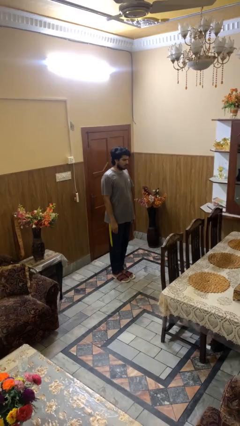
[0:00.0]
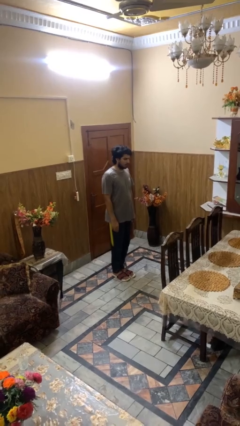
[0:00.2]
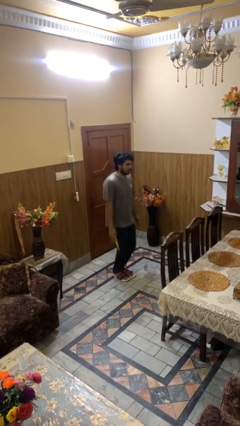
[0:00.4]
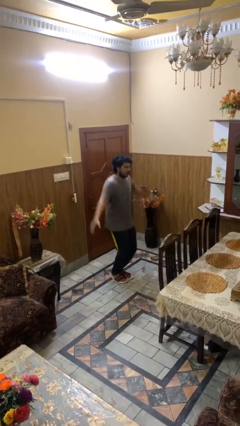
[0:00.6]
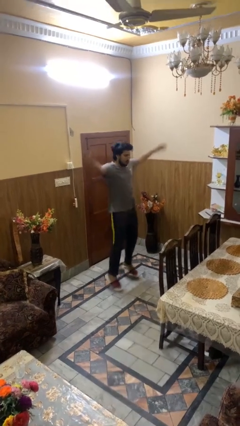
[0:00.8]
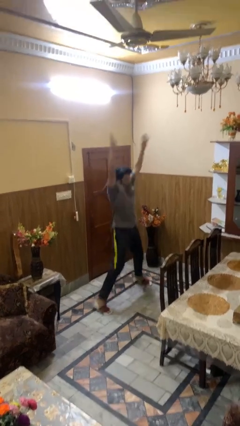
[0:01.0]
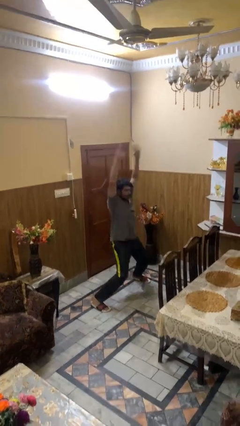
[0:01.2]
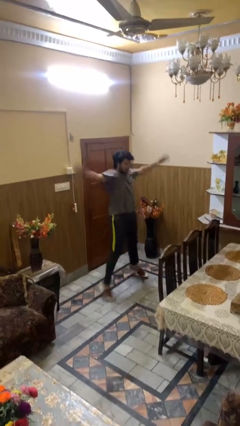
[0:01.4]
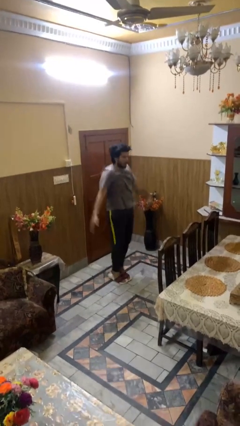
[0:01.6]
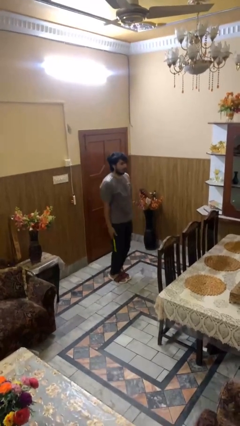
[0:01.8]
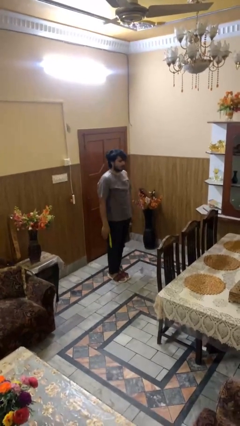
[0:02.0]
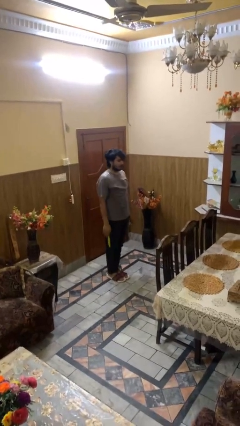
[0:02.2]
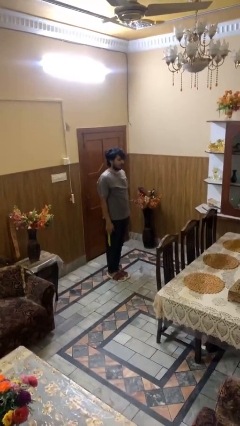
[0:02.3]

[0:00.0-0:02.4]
person exercises with jumping jacks

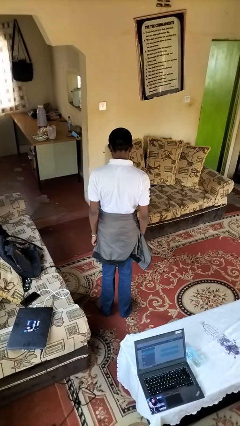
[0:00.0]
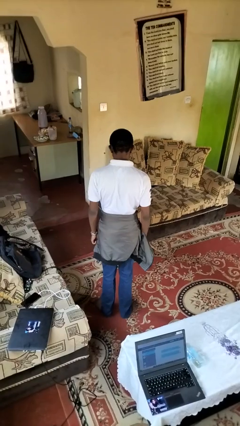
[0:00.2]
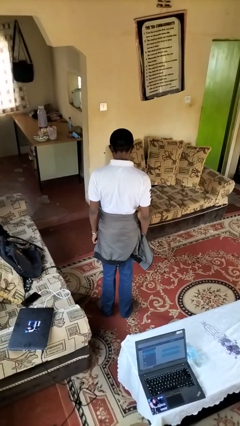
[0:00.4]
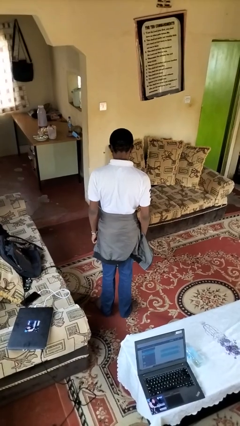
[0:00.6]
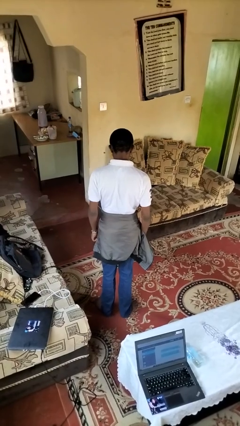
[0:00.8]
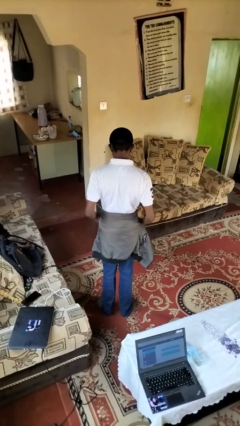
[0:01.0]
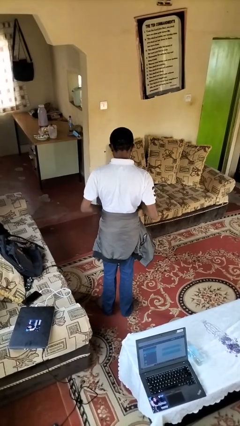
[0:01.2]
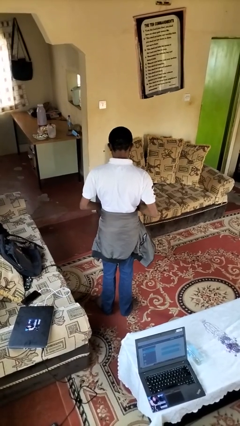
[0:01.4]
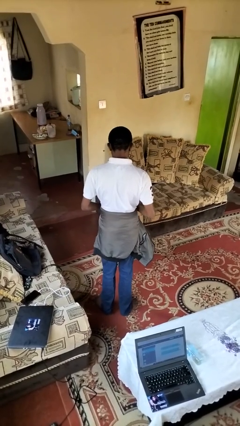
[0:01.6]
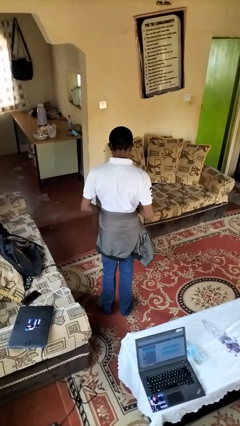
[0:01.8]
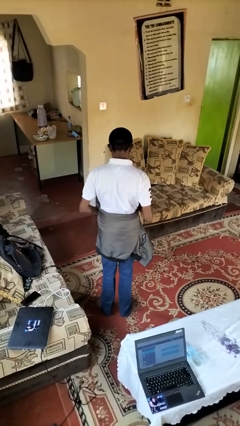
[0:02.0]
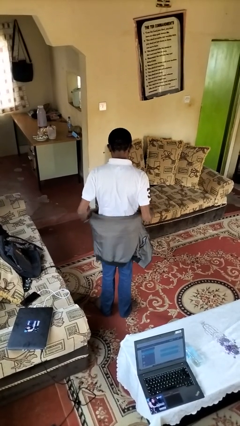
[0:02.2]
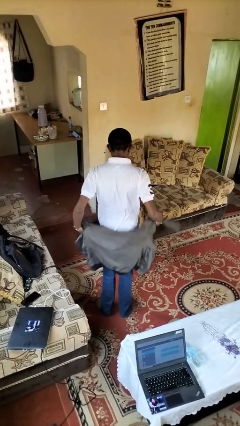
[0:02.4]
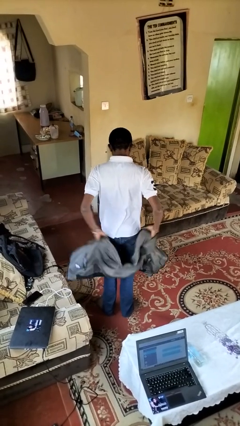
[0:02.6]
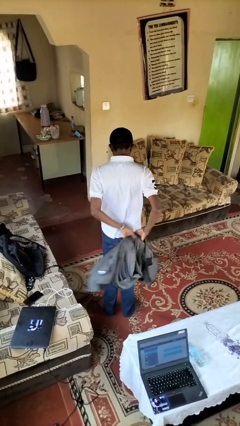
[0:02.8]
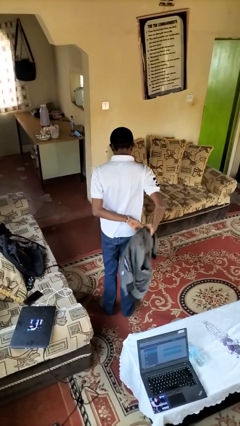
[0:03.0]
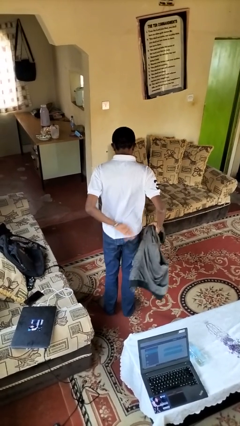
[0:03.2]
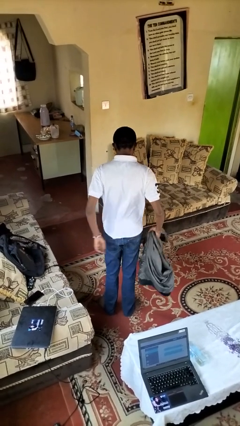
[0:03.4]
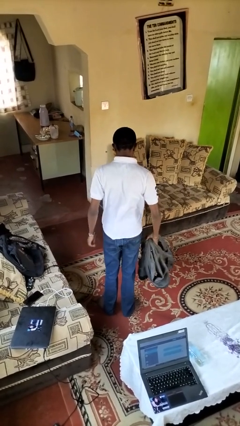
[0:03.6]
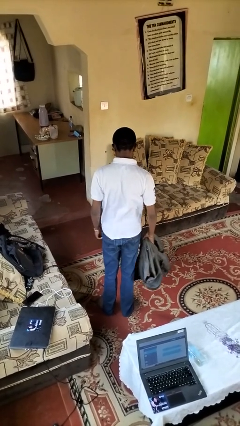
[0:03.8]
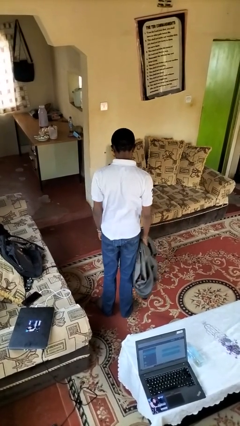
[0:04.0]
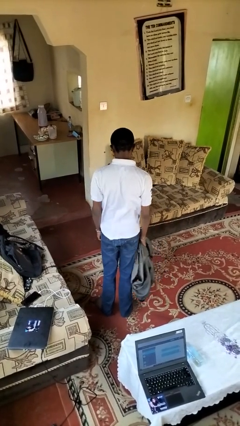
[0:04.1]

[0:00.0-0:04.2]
person unties jacket around waist

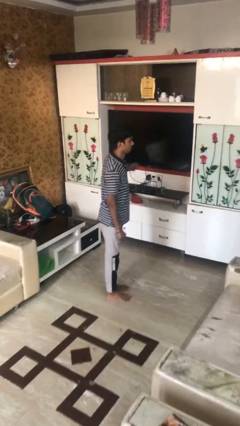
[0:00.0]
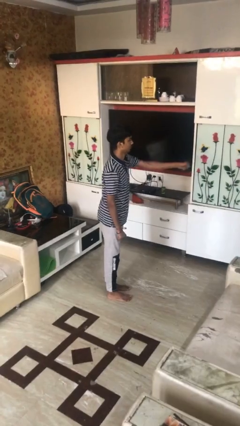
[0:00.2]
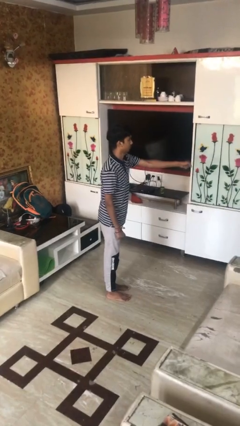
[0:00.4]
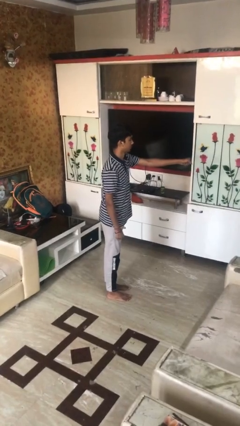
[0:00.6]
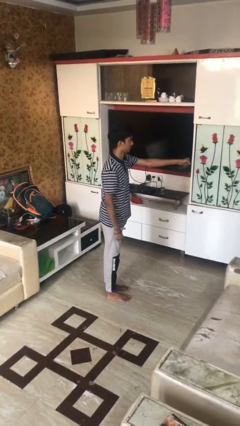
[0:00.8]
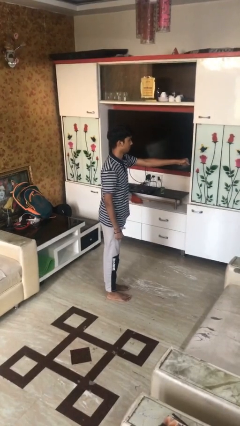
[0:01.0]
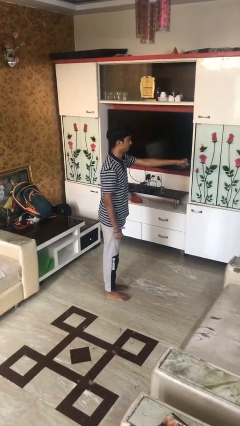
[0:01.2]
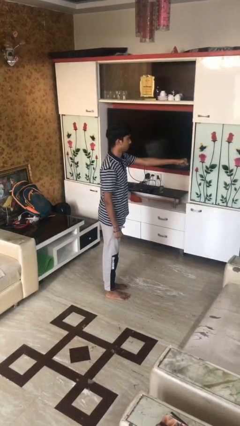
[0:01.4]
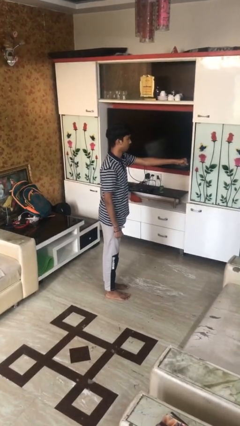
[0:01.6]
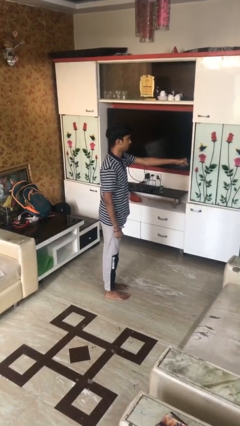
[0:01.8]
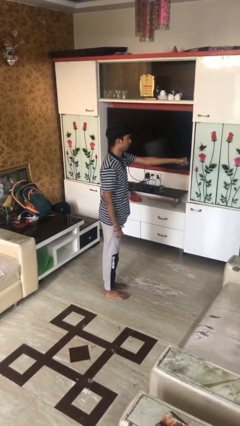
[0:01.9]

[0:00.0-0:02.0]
person punches

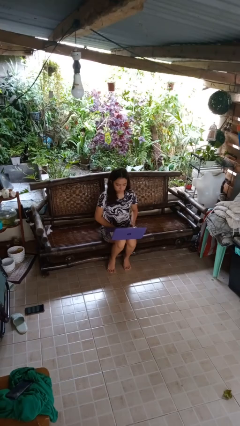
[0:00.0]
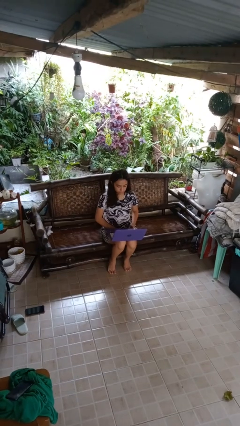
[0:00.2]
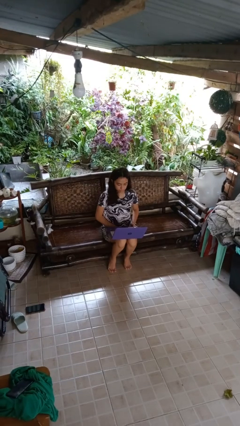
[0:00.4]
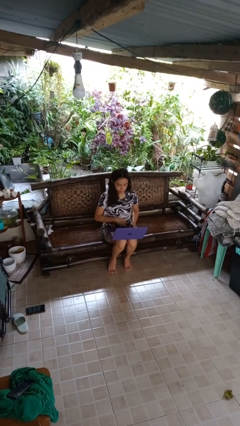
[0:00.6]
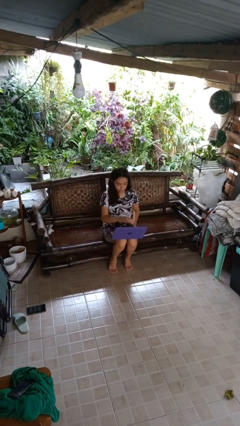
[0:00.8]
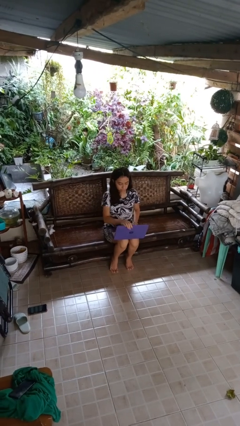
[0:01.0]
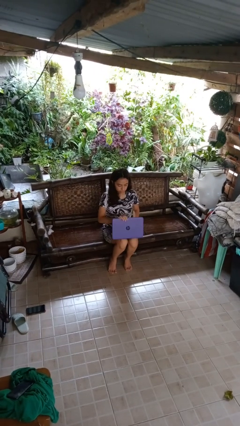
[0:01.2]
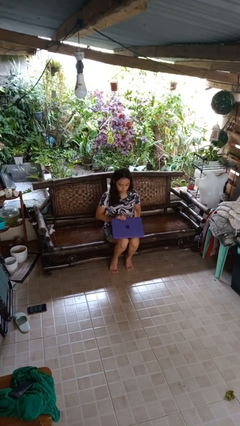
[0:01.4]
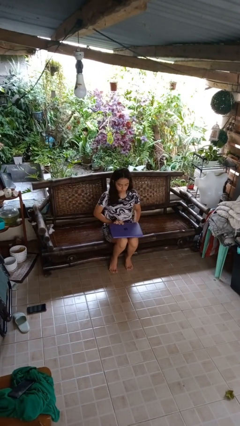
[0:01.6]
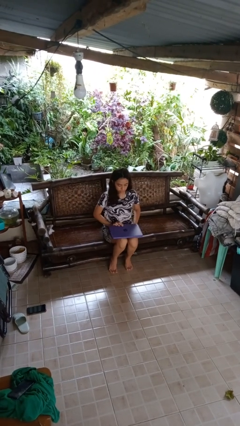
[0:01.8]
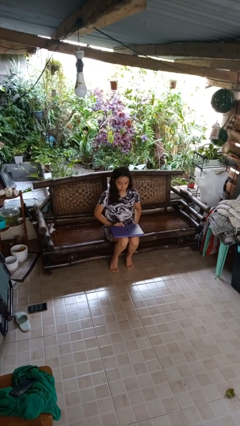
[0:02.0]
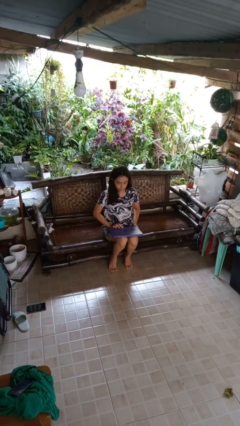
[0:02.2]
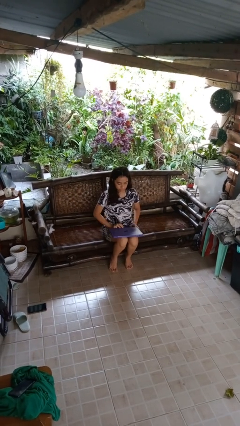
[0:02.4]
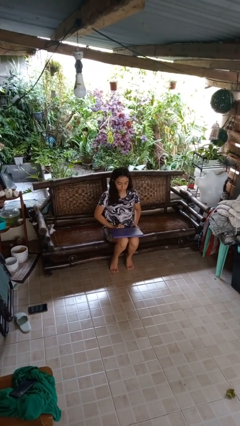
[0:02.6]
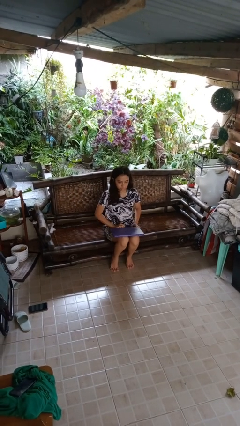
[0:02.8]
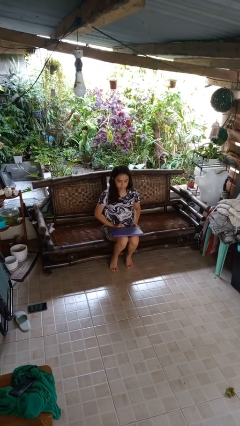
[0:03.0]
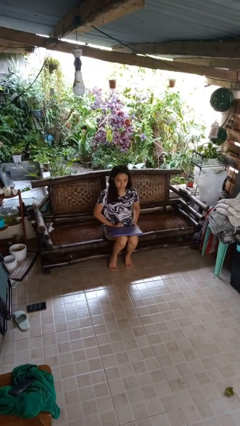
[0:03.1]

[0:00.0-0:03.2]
person closes laptop

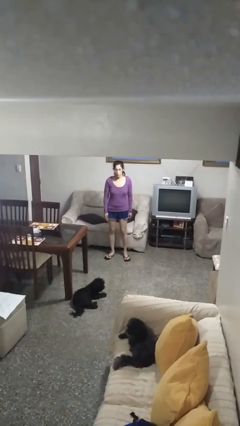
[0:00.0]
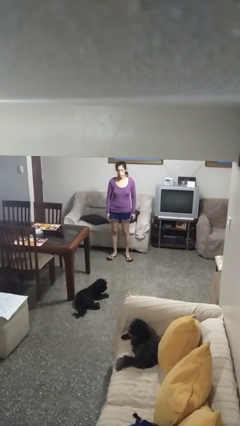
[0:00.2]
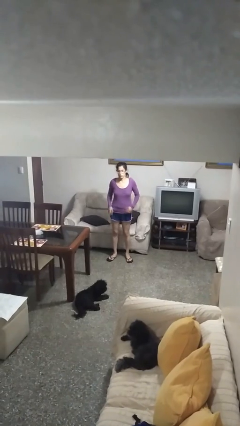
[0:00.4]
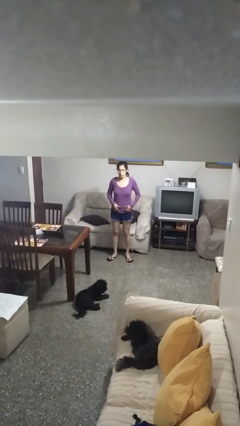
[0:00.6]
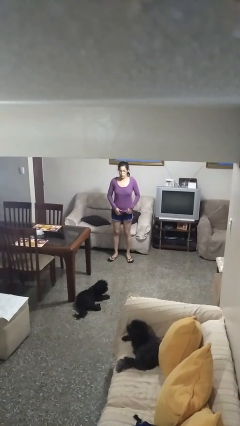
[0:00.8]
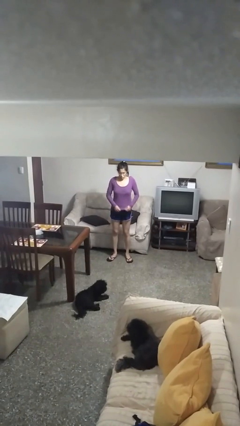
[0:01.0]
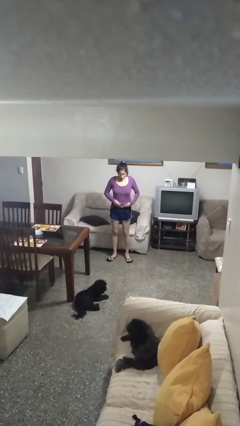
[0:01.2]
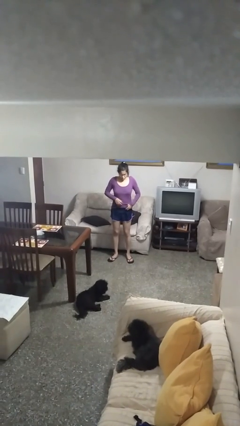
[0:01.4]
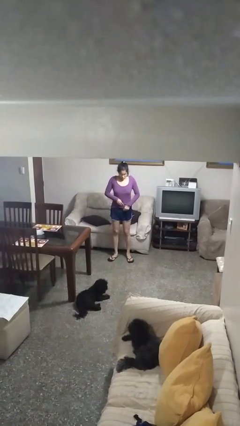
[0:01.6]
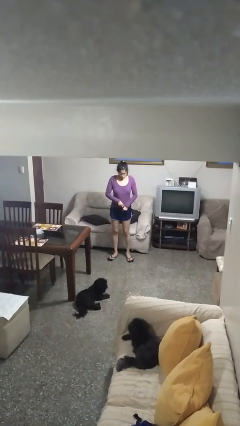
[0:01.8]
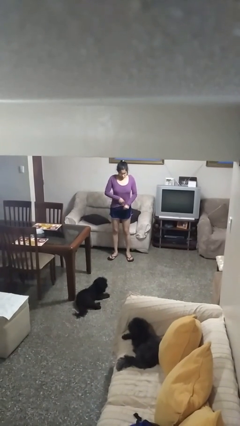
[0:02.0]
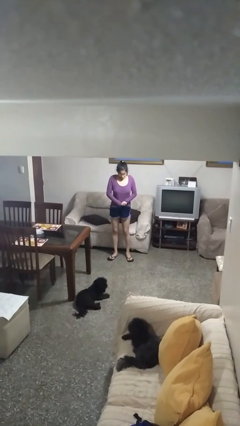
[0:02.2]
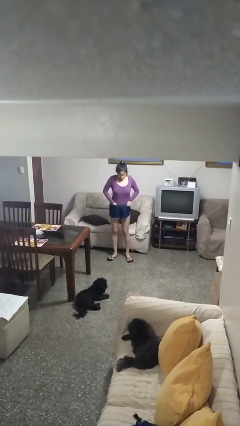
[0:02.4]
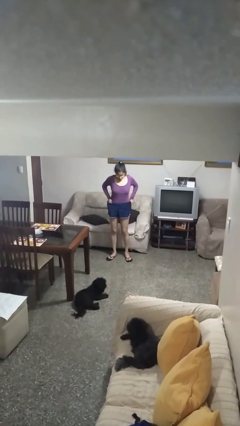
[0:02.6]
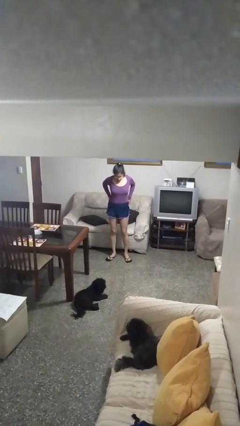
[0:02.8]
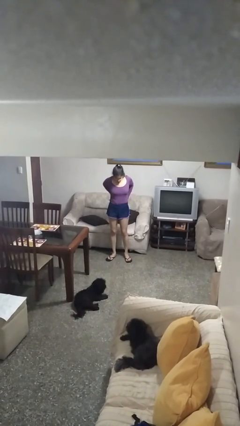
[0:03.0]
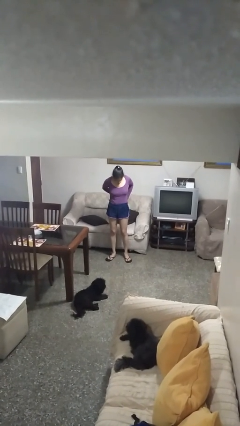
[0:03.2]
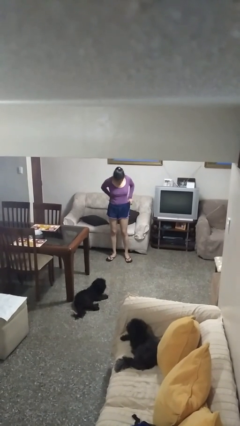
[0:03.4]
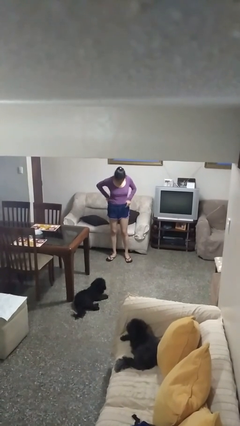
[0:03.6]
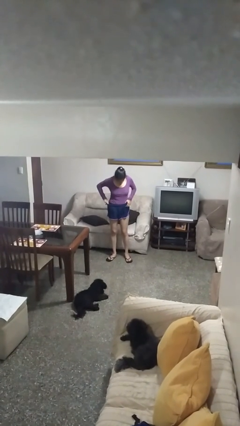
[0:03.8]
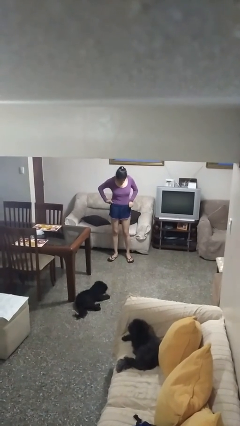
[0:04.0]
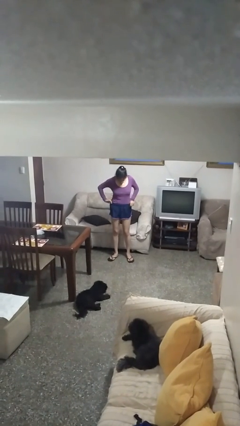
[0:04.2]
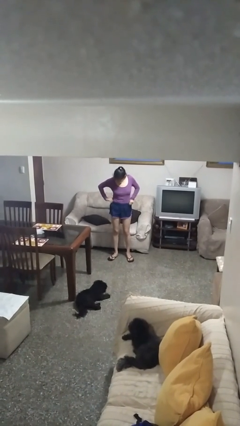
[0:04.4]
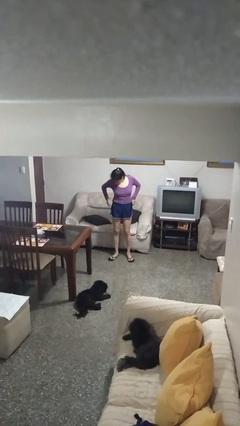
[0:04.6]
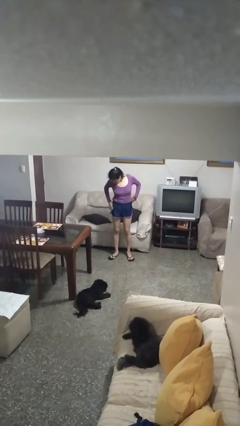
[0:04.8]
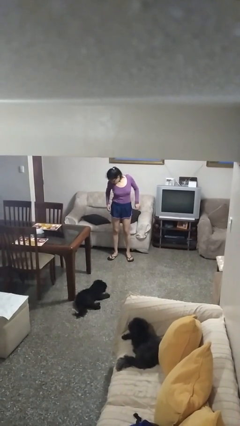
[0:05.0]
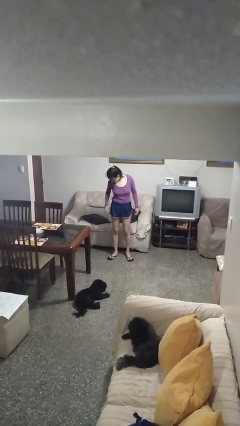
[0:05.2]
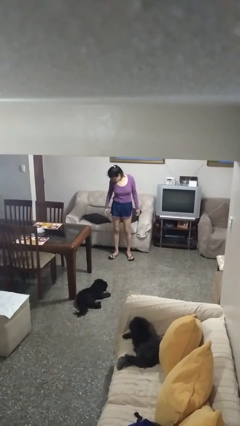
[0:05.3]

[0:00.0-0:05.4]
person tucks in shirt

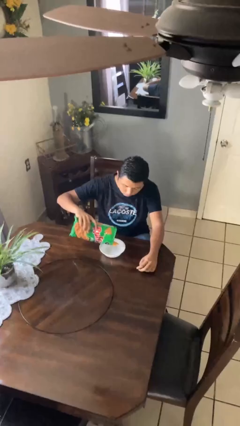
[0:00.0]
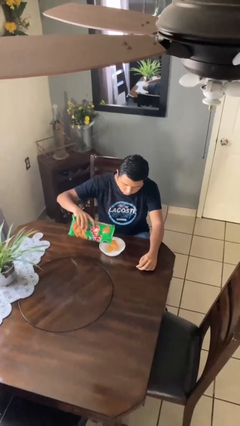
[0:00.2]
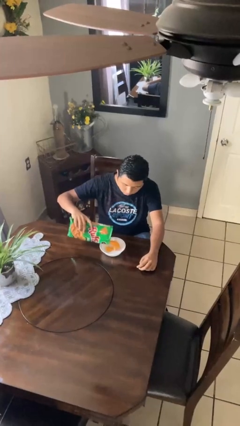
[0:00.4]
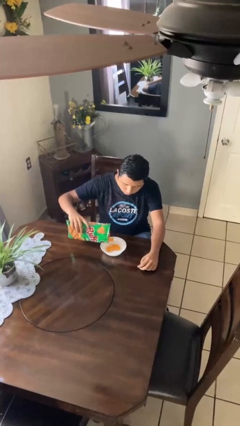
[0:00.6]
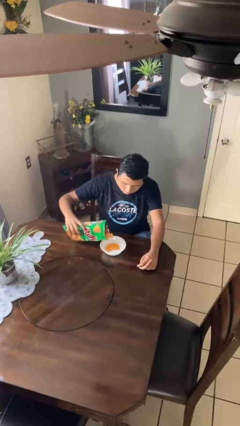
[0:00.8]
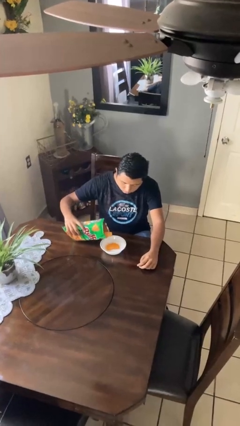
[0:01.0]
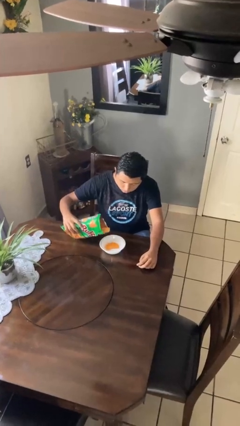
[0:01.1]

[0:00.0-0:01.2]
person pours into bowl
